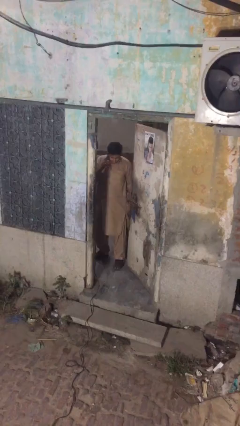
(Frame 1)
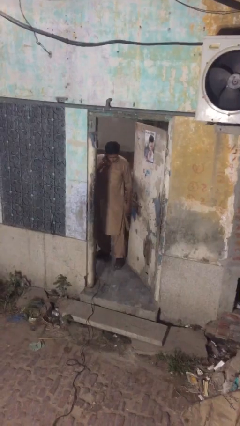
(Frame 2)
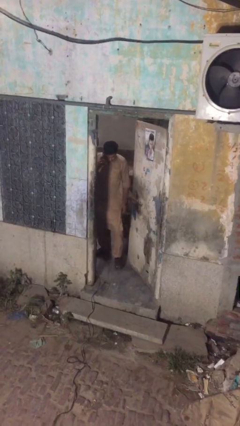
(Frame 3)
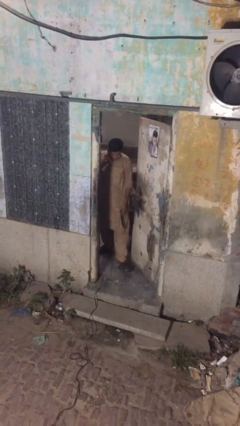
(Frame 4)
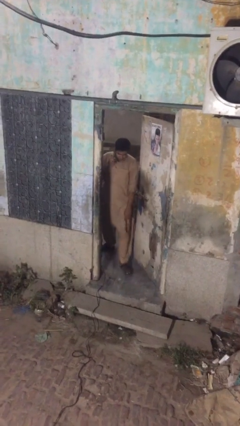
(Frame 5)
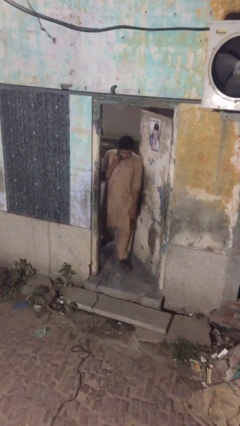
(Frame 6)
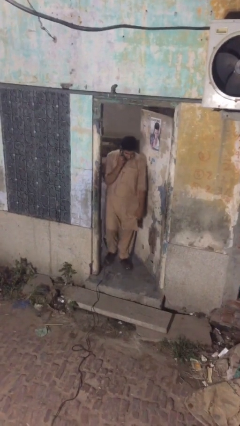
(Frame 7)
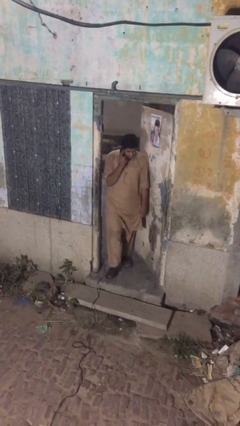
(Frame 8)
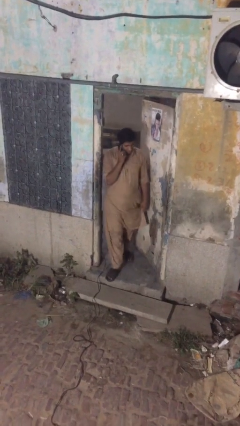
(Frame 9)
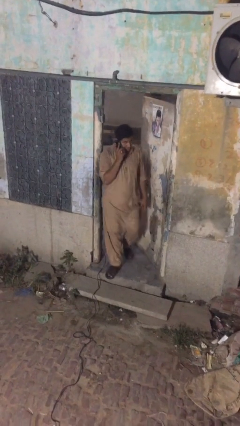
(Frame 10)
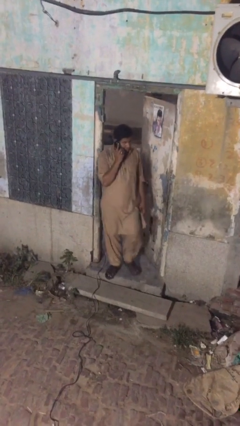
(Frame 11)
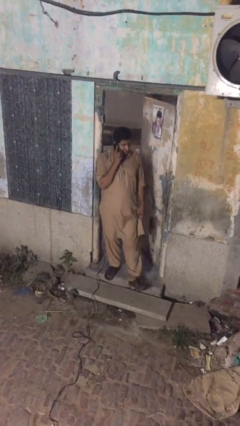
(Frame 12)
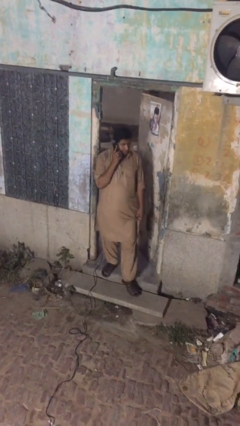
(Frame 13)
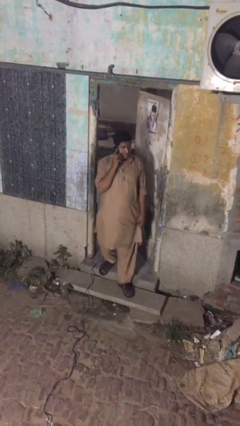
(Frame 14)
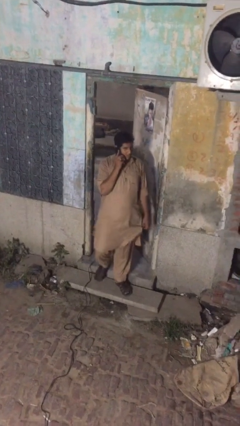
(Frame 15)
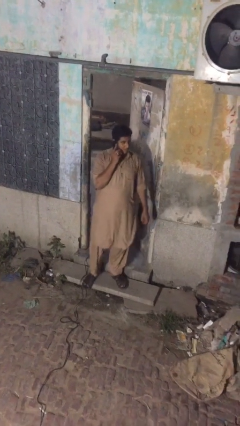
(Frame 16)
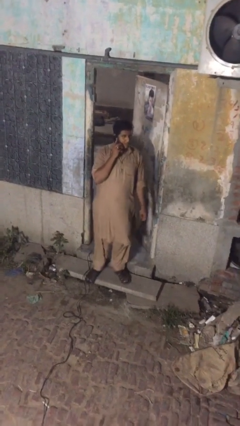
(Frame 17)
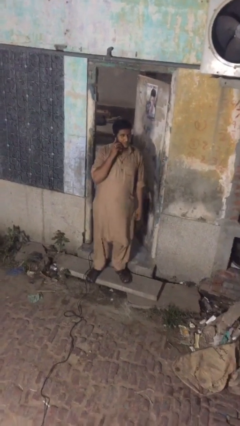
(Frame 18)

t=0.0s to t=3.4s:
person enters scene through structure

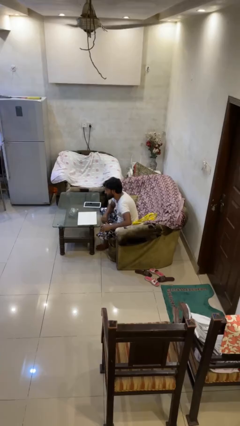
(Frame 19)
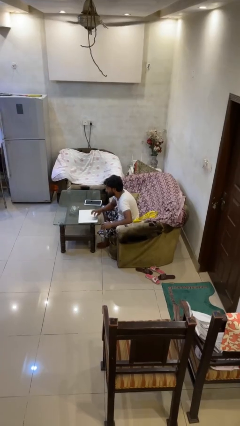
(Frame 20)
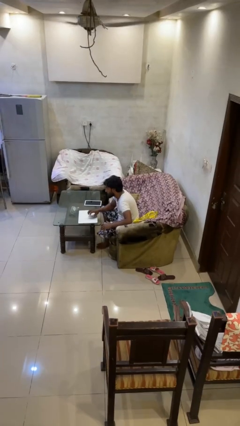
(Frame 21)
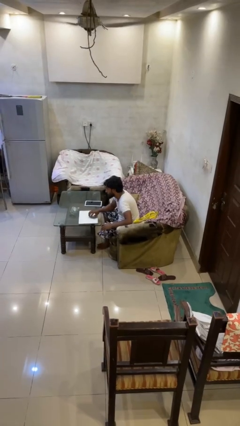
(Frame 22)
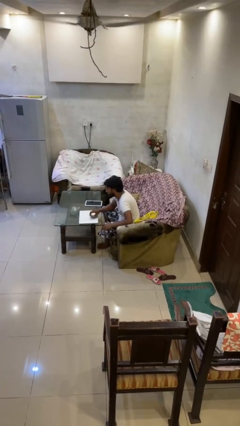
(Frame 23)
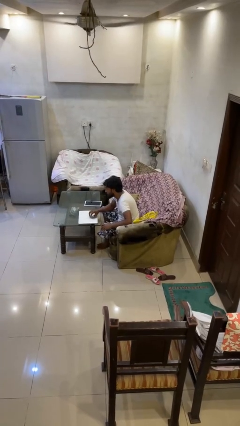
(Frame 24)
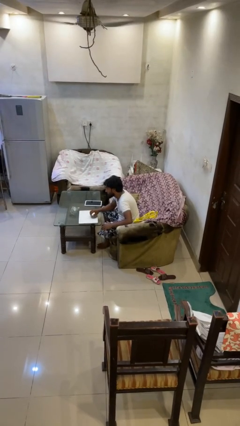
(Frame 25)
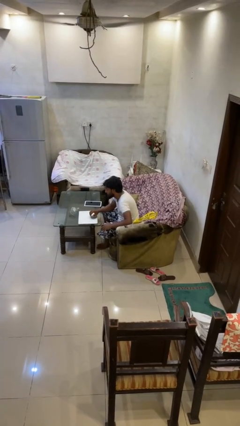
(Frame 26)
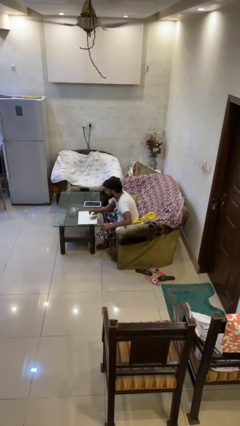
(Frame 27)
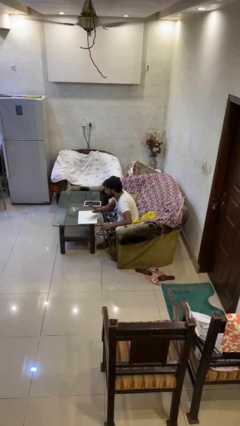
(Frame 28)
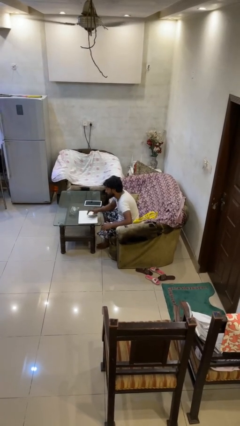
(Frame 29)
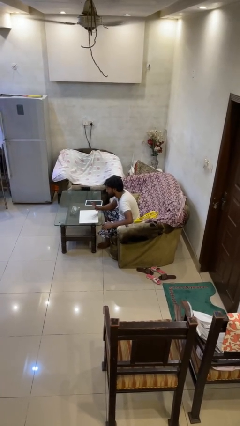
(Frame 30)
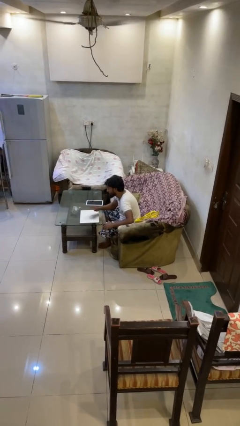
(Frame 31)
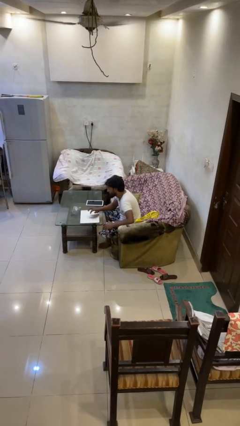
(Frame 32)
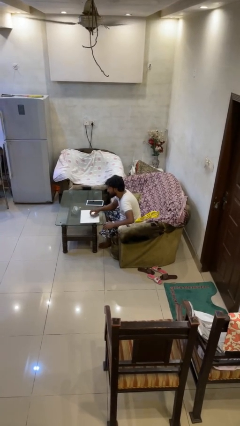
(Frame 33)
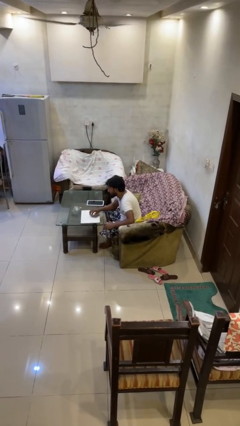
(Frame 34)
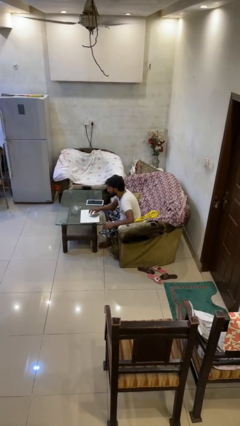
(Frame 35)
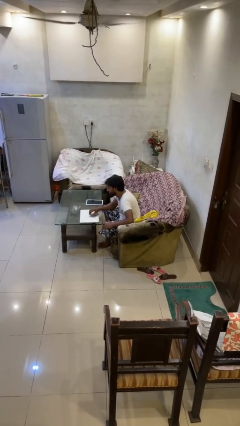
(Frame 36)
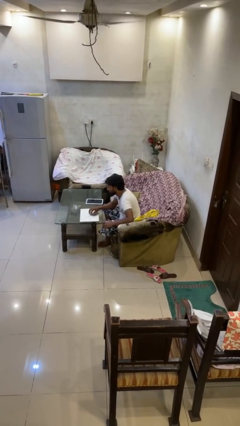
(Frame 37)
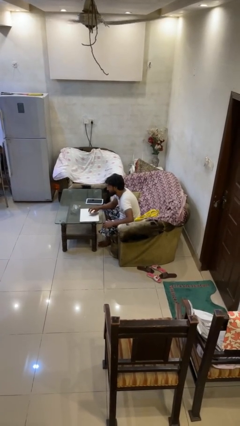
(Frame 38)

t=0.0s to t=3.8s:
person taps object with finger

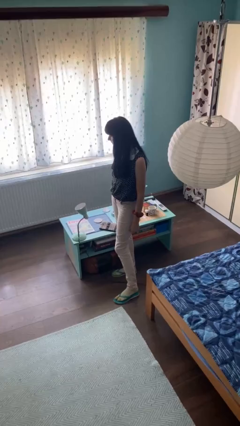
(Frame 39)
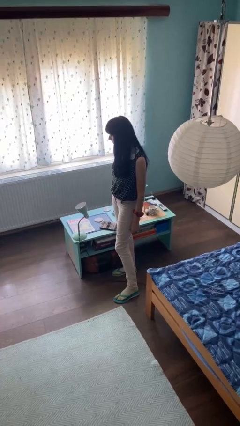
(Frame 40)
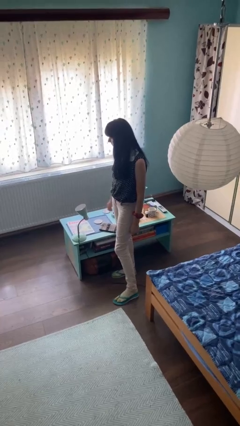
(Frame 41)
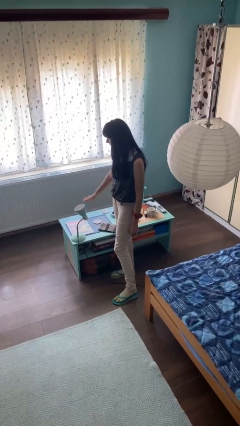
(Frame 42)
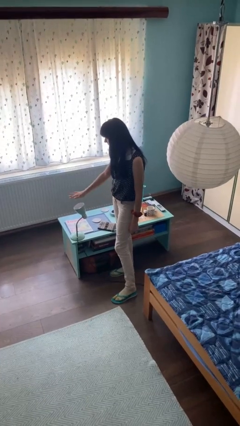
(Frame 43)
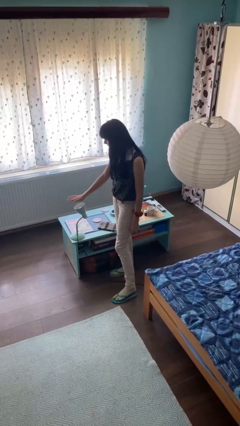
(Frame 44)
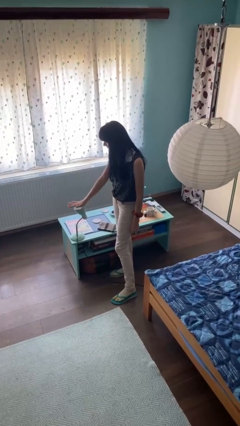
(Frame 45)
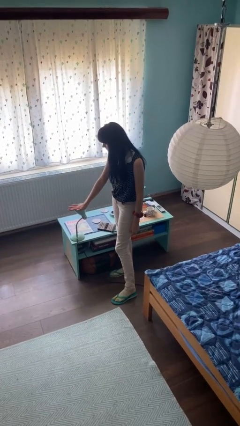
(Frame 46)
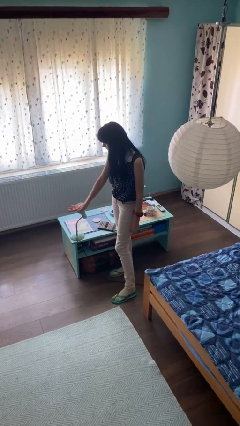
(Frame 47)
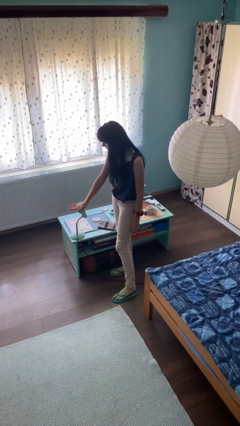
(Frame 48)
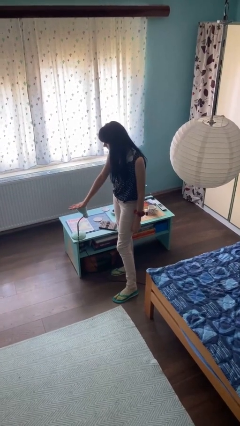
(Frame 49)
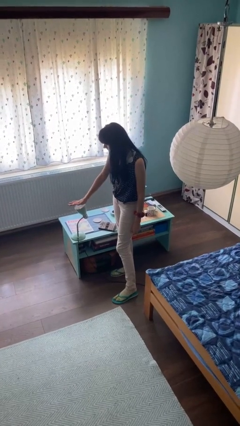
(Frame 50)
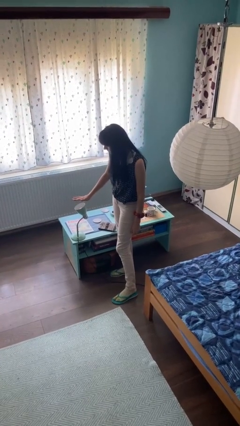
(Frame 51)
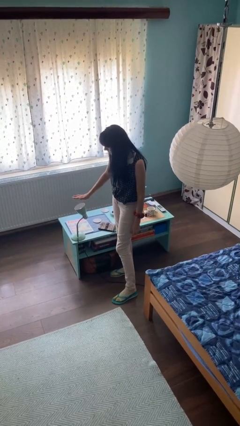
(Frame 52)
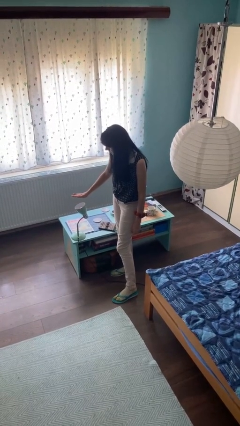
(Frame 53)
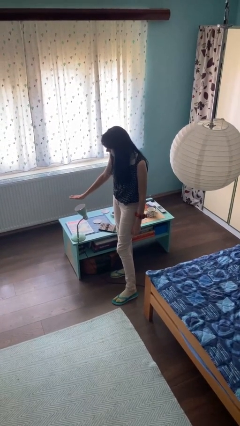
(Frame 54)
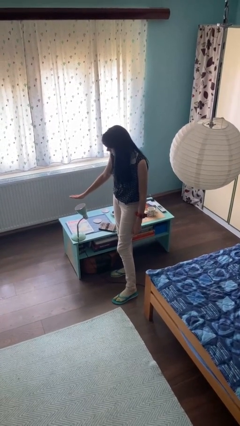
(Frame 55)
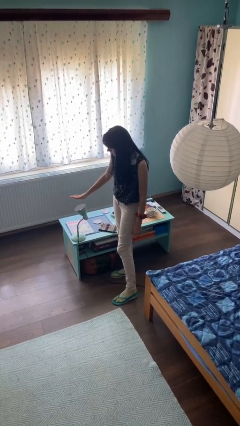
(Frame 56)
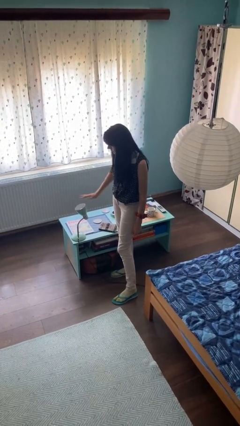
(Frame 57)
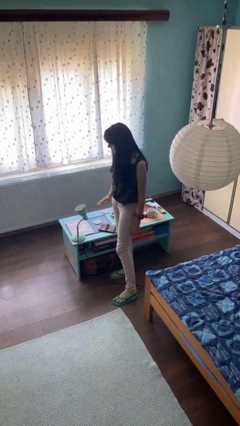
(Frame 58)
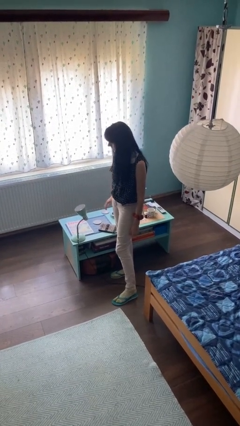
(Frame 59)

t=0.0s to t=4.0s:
person waves hand over object

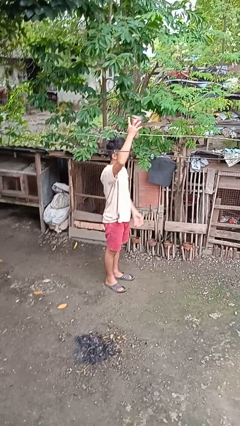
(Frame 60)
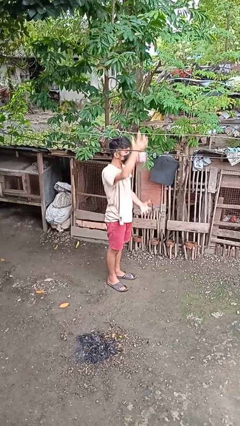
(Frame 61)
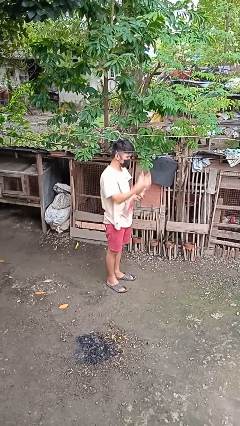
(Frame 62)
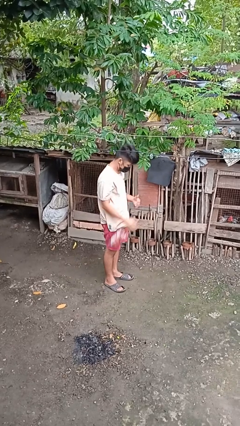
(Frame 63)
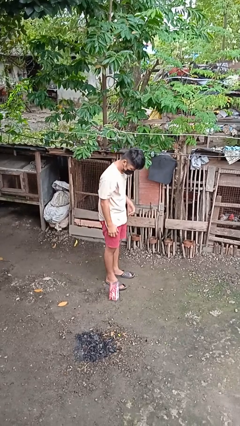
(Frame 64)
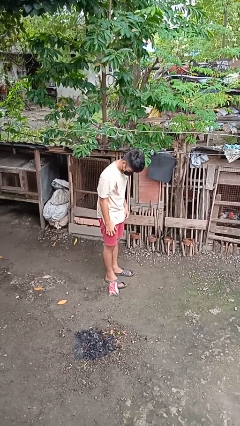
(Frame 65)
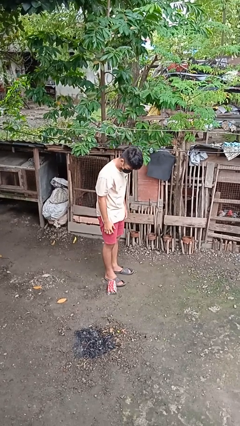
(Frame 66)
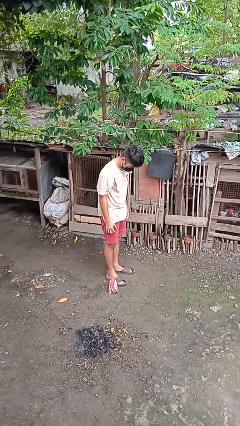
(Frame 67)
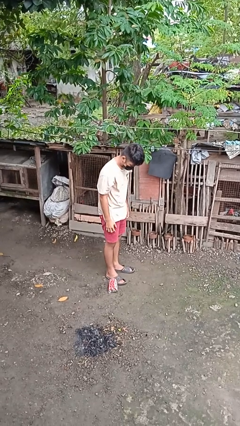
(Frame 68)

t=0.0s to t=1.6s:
person drops object

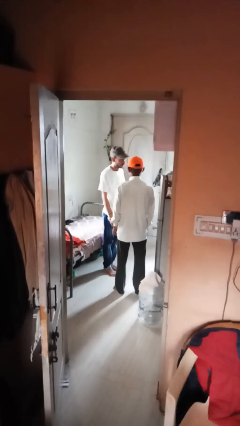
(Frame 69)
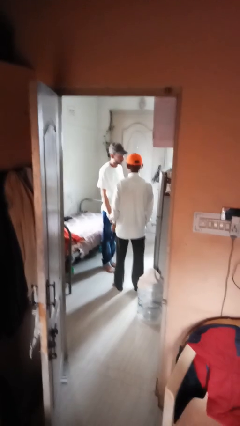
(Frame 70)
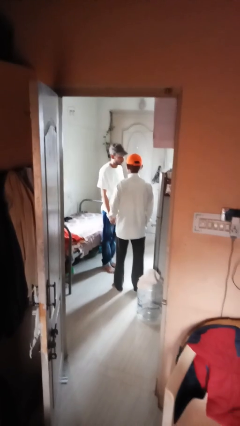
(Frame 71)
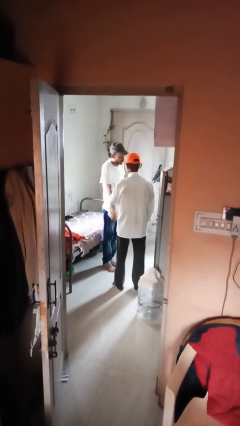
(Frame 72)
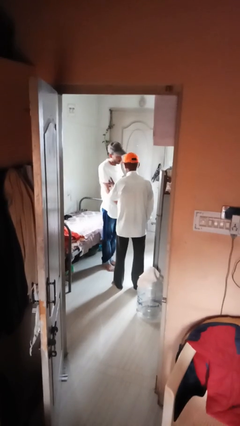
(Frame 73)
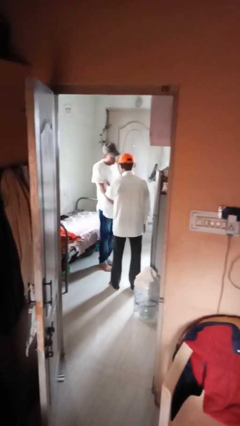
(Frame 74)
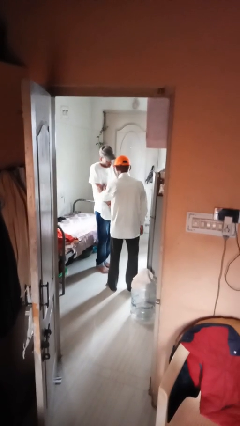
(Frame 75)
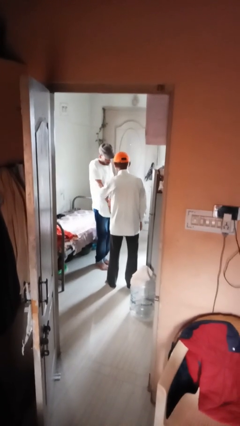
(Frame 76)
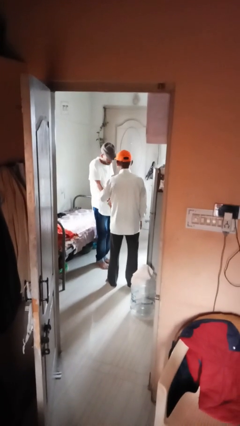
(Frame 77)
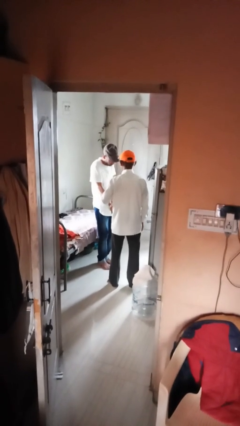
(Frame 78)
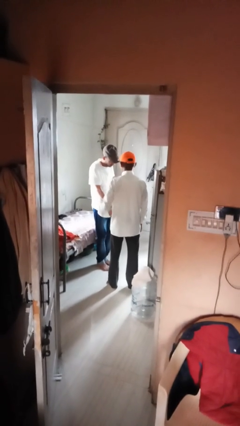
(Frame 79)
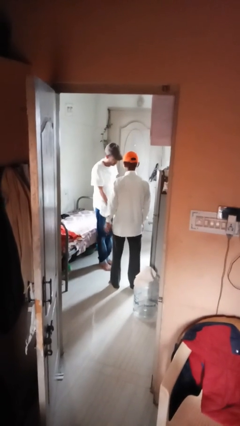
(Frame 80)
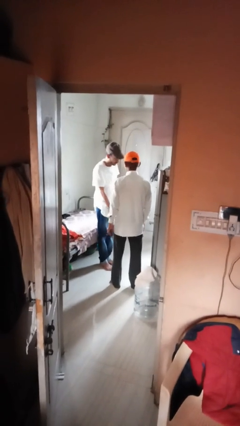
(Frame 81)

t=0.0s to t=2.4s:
person tickles person

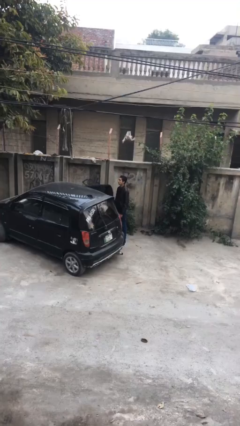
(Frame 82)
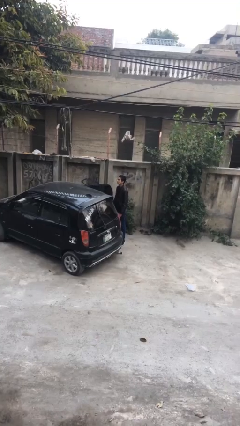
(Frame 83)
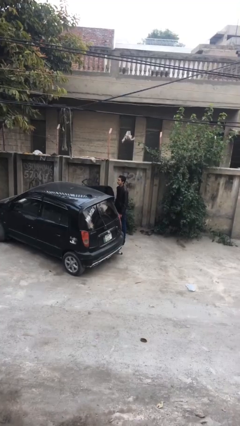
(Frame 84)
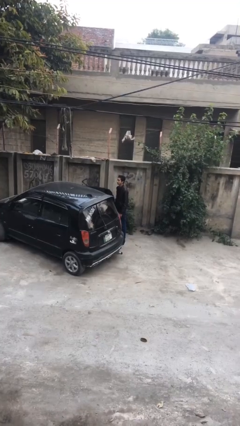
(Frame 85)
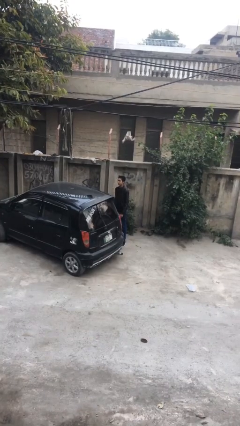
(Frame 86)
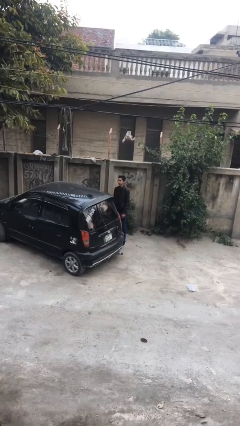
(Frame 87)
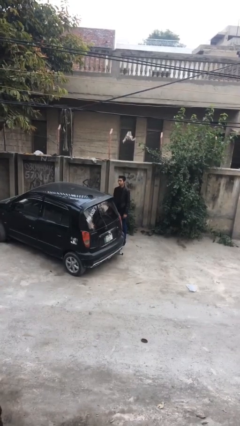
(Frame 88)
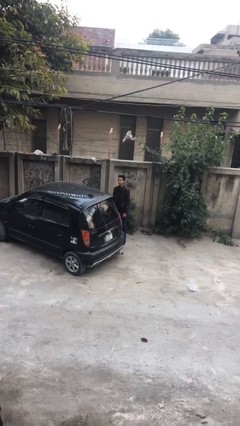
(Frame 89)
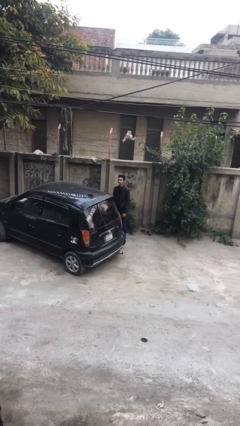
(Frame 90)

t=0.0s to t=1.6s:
person closes car door

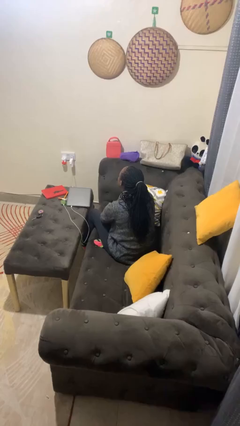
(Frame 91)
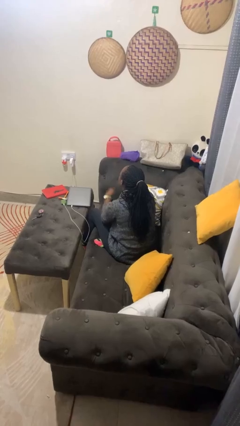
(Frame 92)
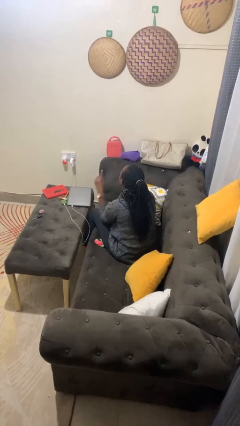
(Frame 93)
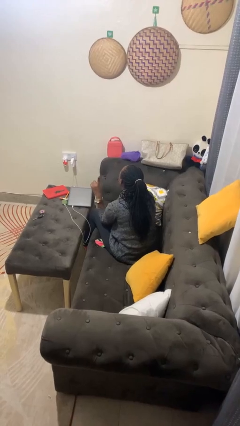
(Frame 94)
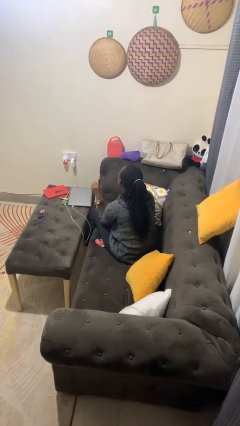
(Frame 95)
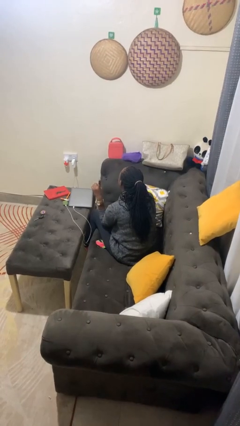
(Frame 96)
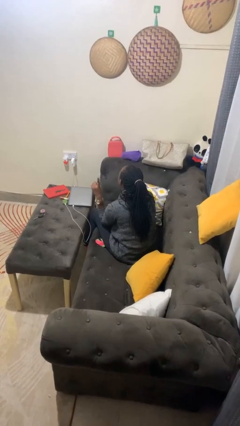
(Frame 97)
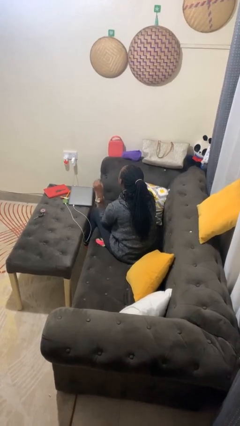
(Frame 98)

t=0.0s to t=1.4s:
person gestures number one
